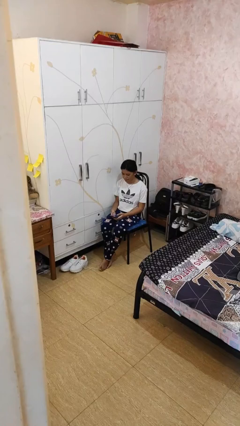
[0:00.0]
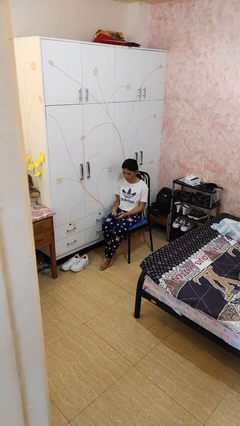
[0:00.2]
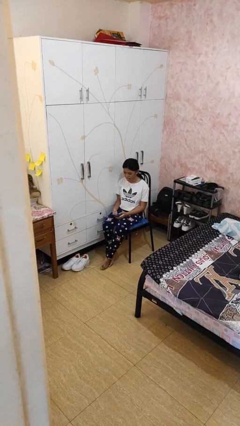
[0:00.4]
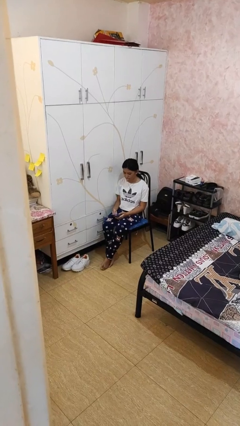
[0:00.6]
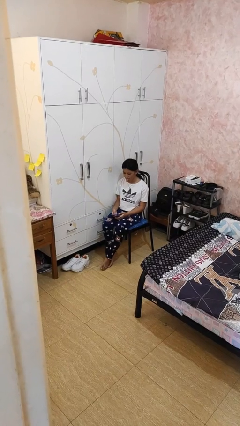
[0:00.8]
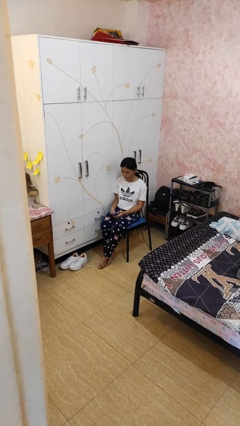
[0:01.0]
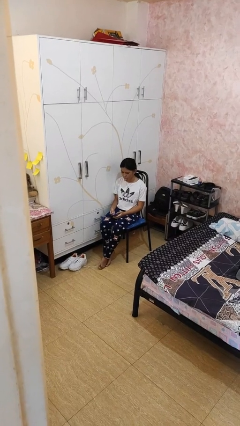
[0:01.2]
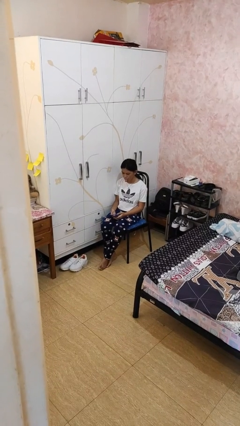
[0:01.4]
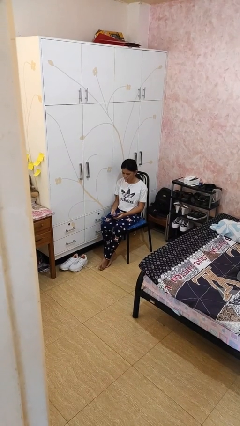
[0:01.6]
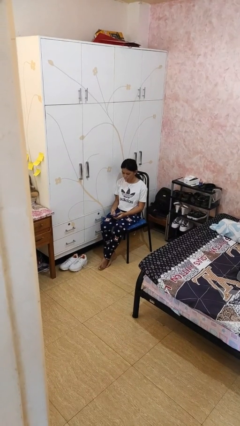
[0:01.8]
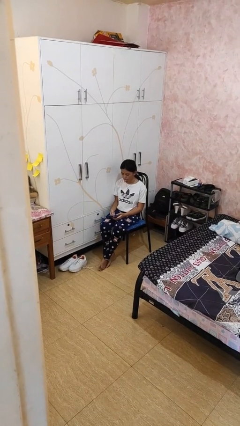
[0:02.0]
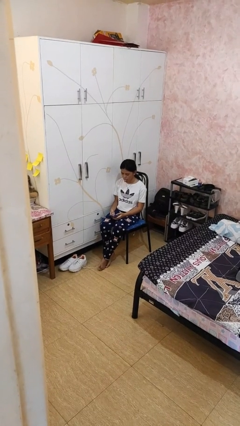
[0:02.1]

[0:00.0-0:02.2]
person sticks out tongue

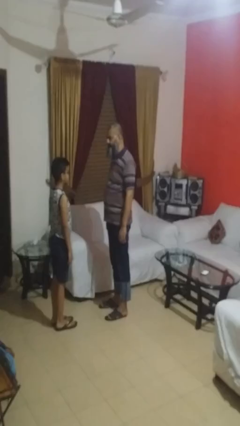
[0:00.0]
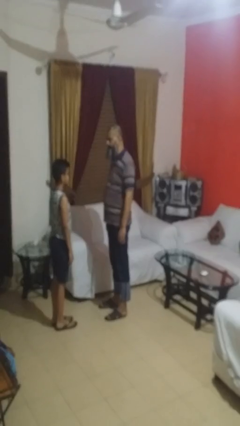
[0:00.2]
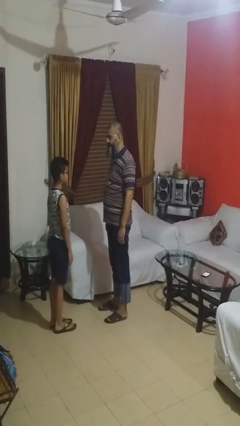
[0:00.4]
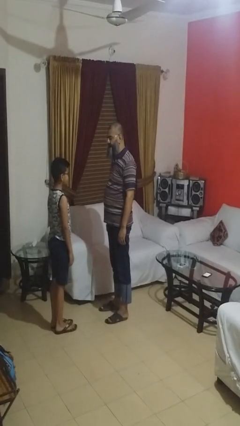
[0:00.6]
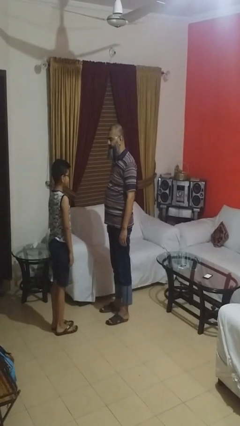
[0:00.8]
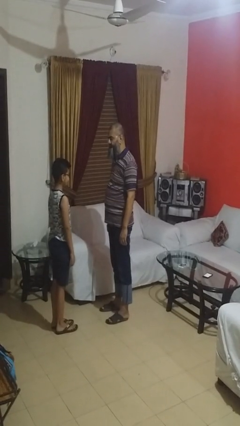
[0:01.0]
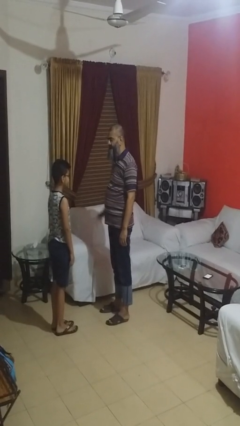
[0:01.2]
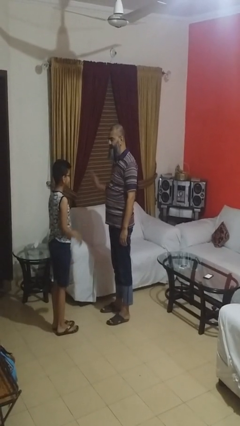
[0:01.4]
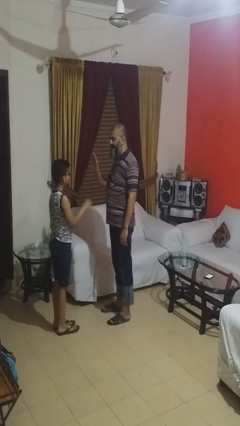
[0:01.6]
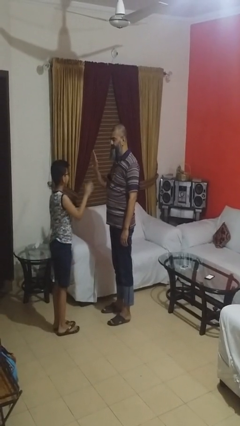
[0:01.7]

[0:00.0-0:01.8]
person highfives hand

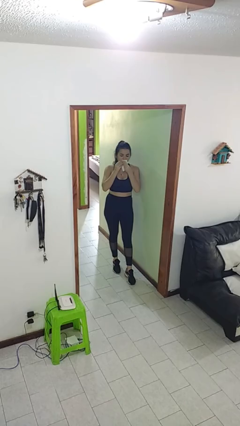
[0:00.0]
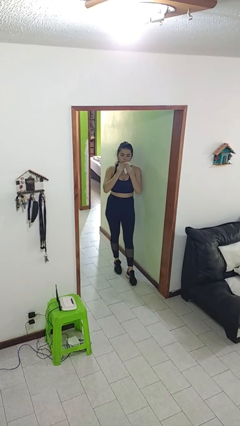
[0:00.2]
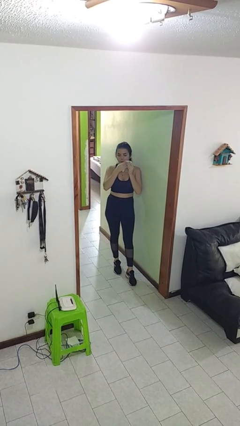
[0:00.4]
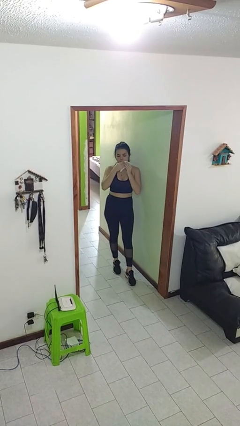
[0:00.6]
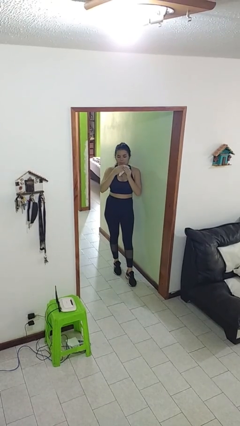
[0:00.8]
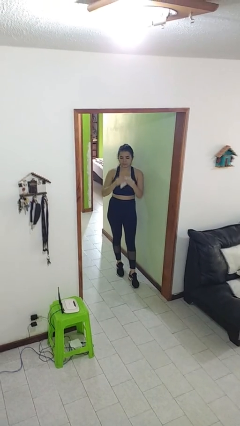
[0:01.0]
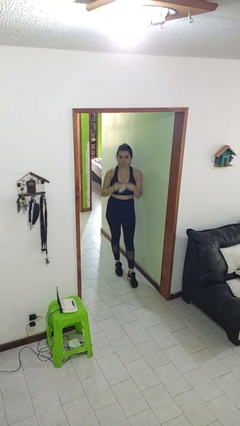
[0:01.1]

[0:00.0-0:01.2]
person wipes mouth with napkin

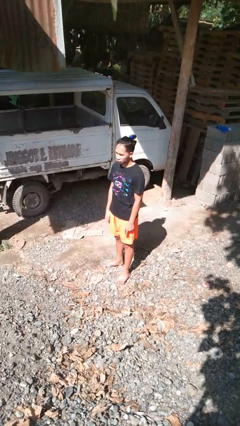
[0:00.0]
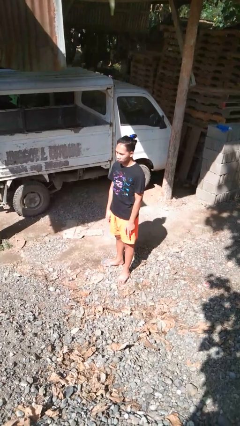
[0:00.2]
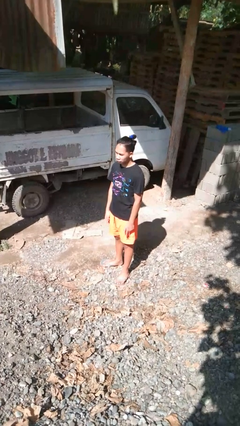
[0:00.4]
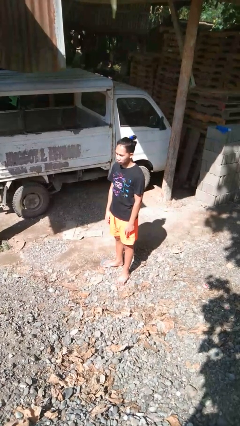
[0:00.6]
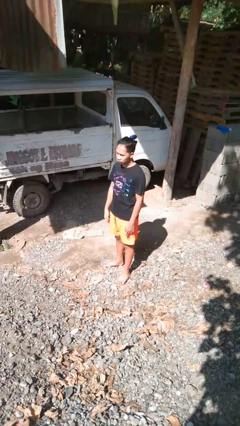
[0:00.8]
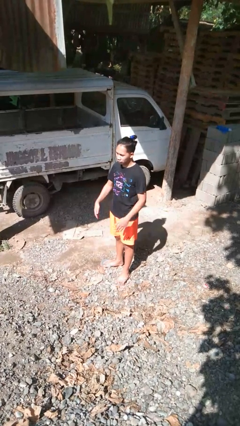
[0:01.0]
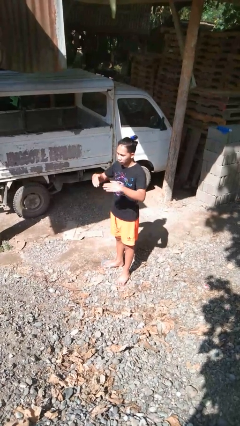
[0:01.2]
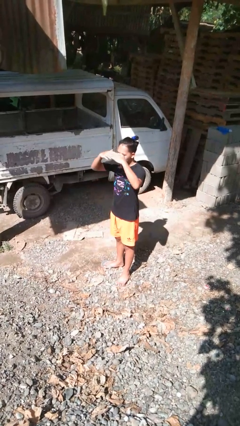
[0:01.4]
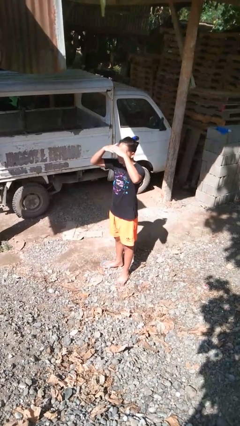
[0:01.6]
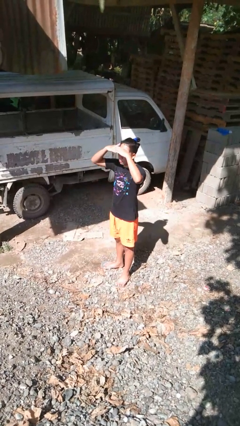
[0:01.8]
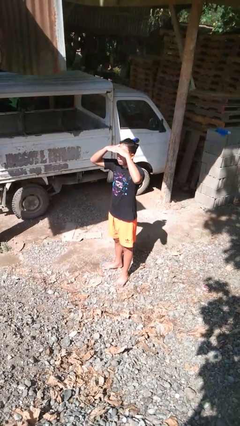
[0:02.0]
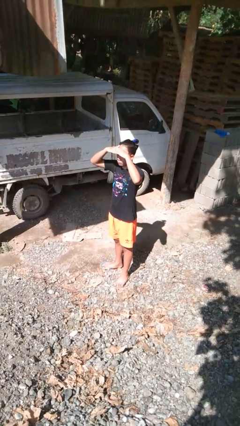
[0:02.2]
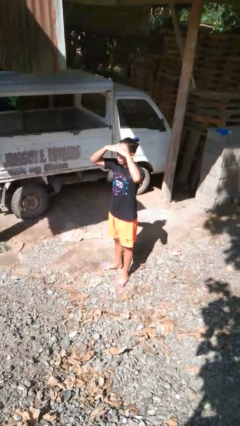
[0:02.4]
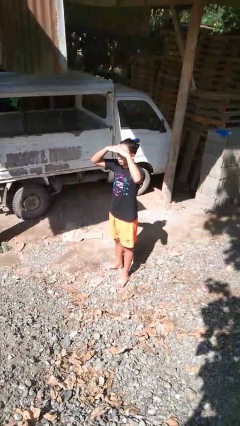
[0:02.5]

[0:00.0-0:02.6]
person shades eyes

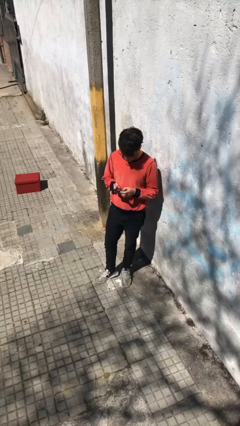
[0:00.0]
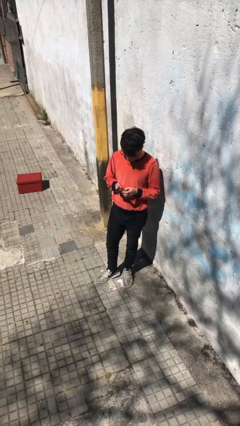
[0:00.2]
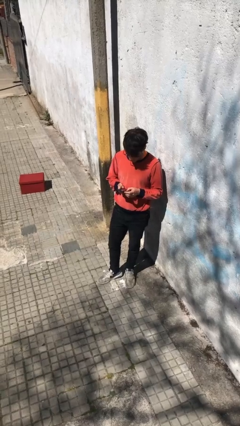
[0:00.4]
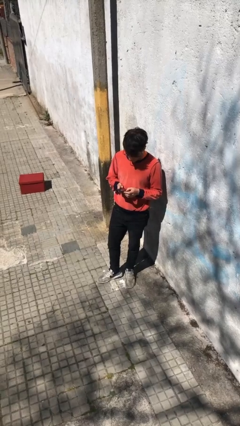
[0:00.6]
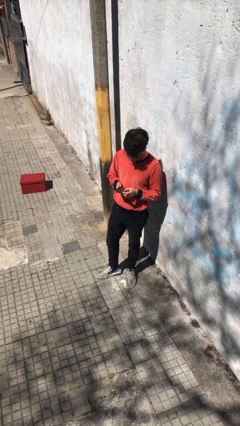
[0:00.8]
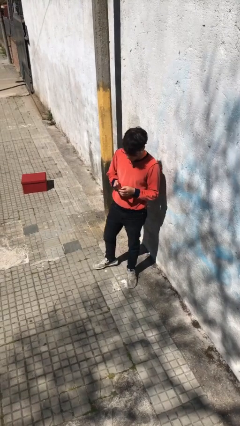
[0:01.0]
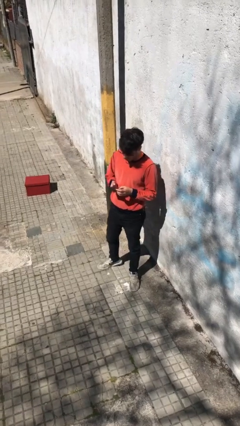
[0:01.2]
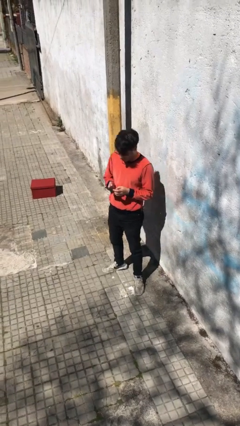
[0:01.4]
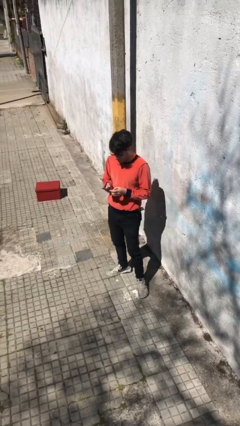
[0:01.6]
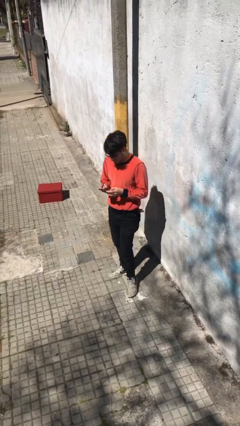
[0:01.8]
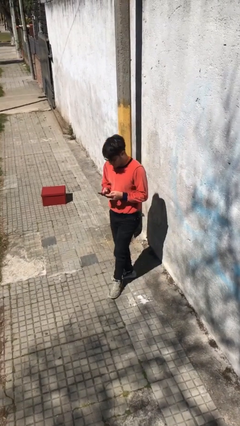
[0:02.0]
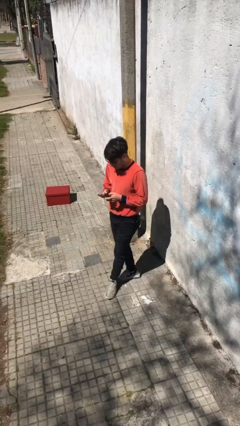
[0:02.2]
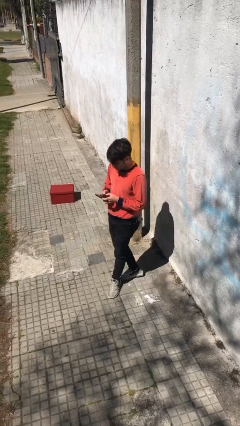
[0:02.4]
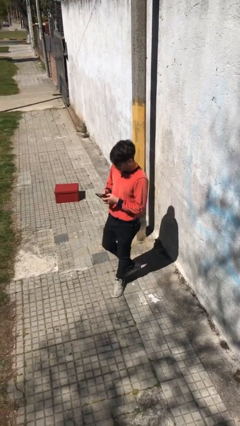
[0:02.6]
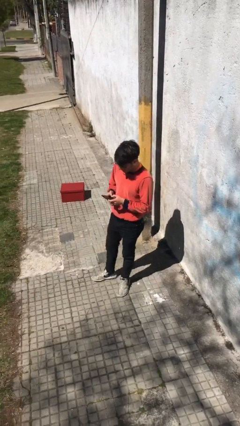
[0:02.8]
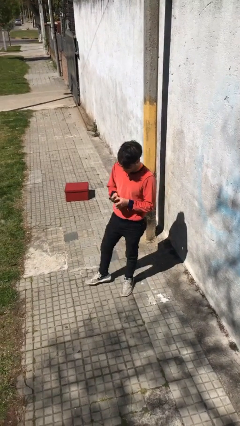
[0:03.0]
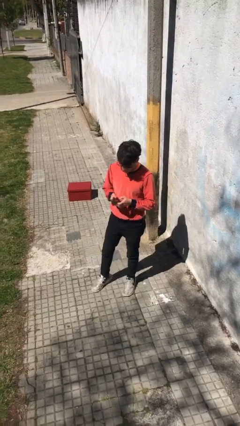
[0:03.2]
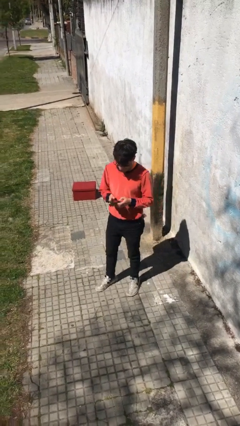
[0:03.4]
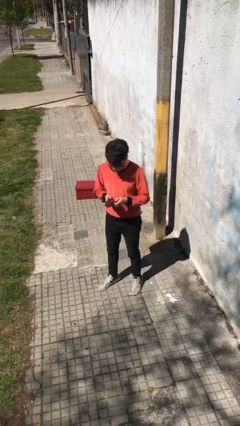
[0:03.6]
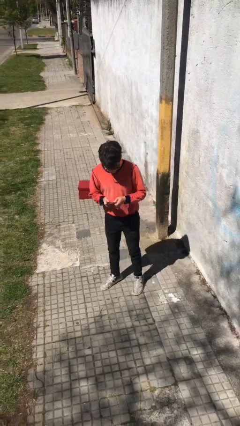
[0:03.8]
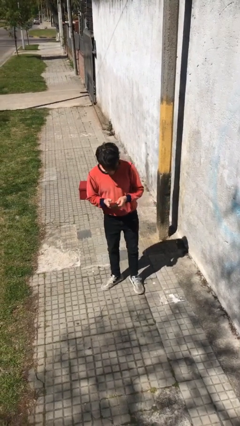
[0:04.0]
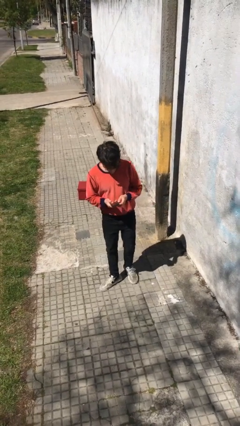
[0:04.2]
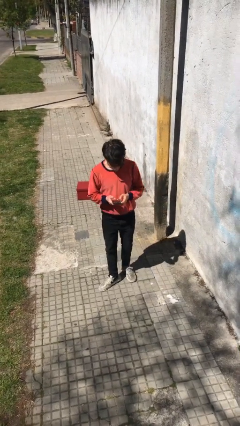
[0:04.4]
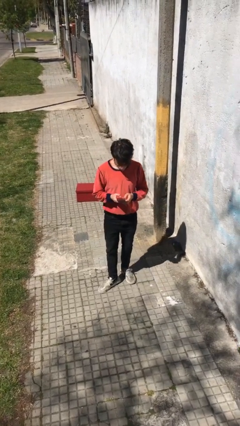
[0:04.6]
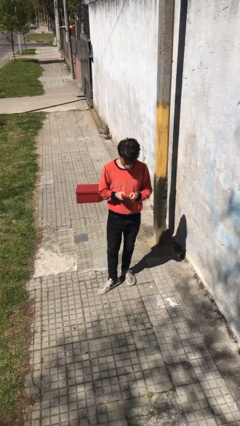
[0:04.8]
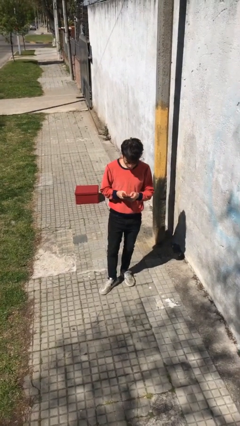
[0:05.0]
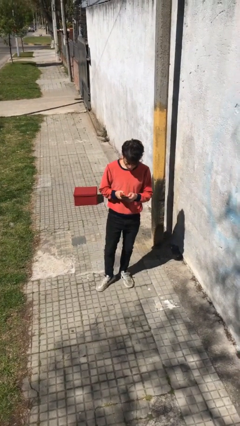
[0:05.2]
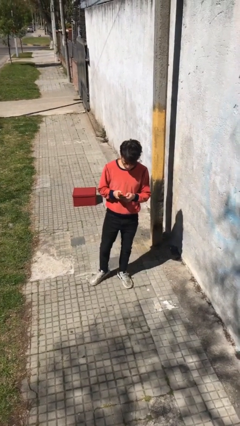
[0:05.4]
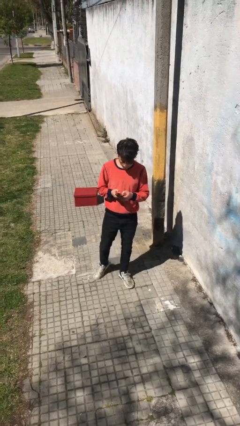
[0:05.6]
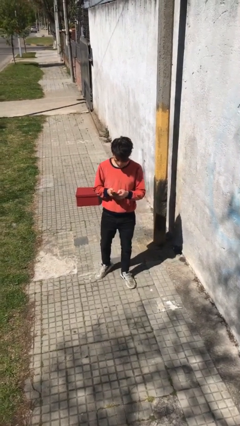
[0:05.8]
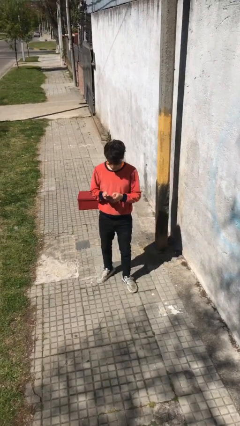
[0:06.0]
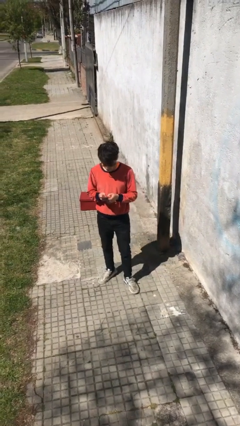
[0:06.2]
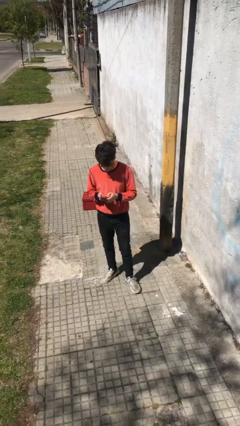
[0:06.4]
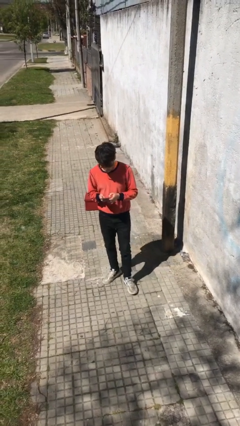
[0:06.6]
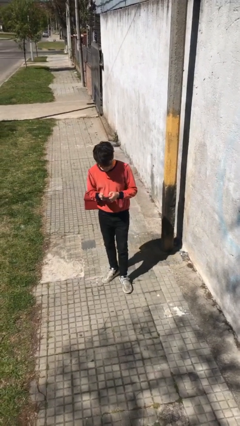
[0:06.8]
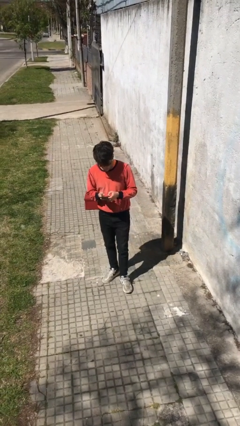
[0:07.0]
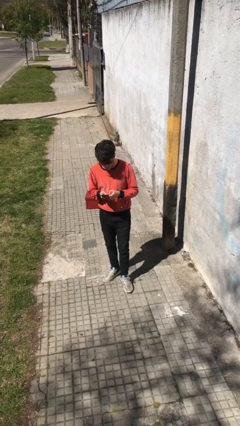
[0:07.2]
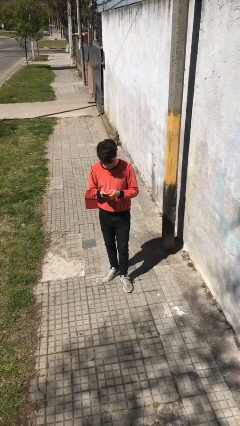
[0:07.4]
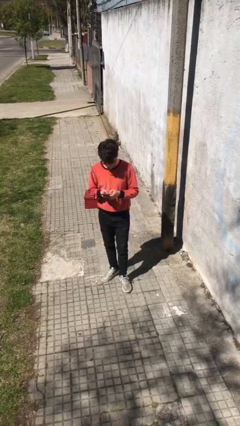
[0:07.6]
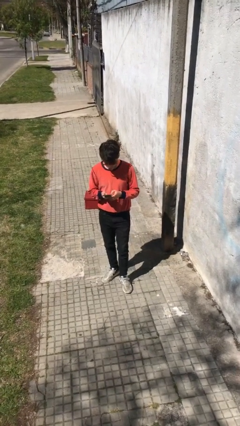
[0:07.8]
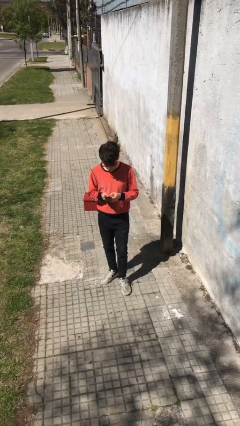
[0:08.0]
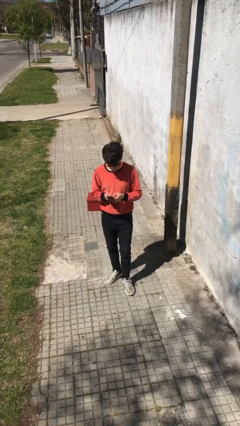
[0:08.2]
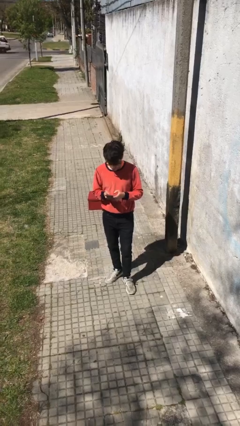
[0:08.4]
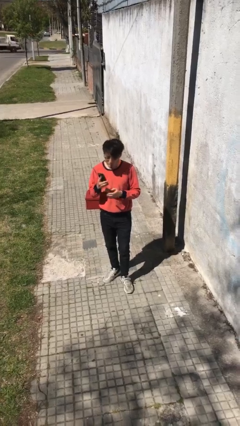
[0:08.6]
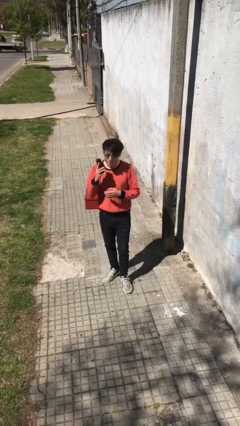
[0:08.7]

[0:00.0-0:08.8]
person texts on phone

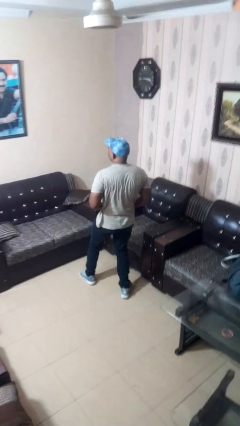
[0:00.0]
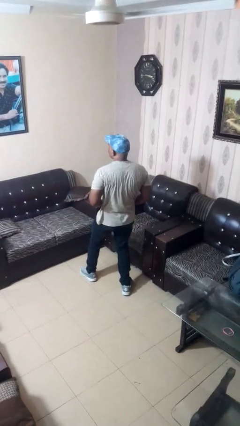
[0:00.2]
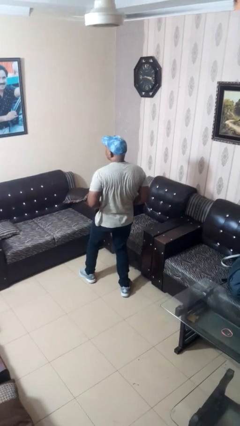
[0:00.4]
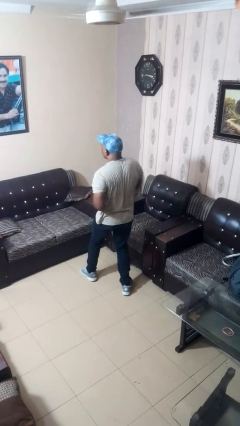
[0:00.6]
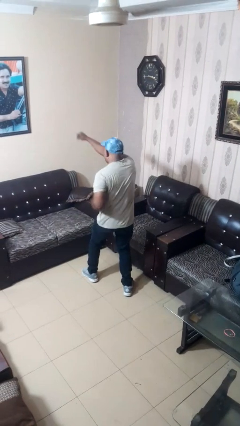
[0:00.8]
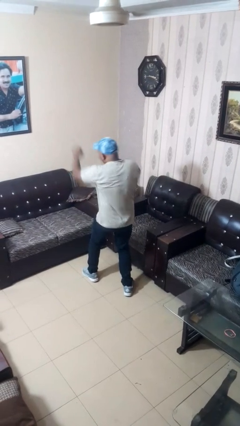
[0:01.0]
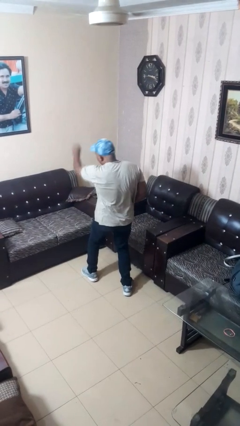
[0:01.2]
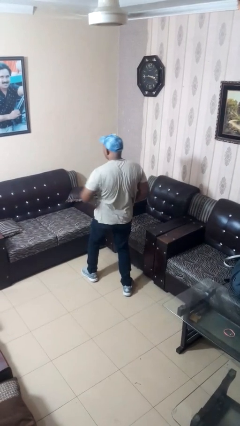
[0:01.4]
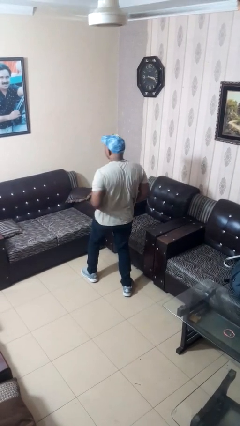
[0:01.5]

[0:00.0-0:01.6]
person punches
